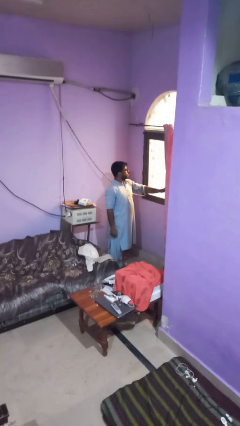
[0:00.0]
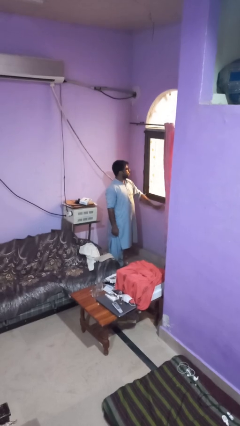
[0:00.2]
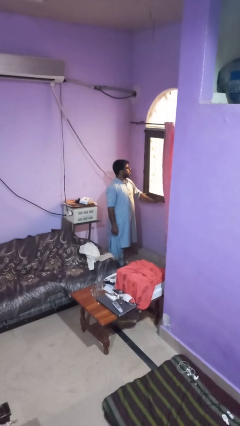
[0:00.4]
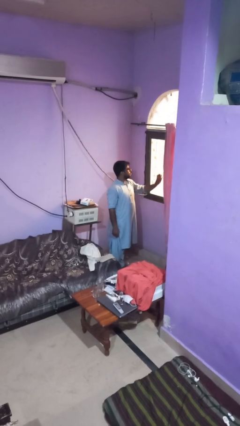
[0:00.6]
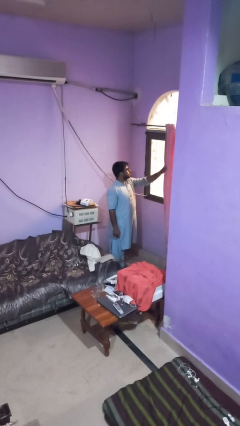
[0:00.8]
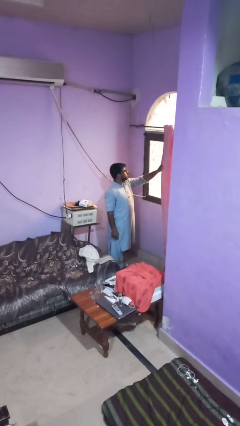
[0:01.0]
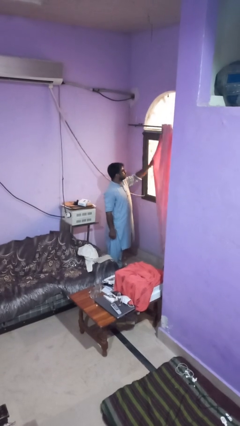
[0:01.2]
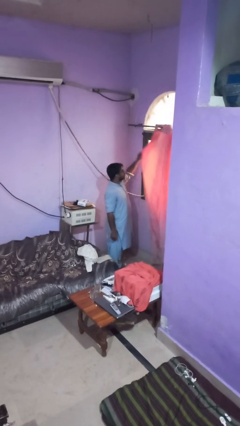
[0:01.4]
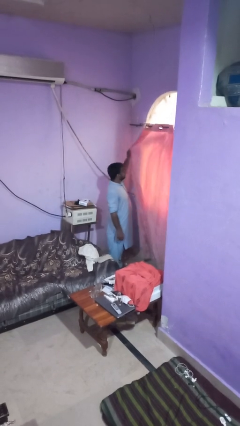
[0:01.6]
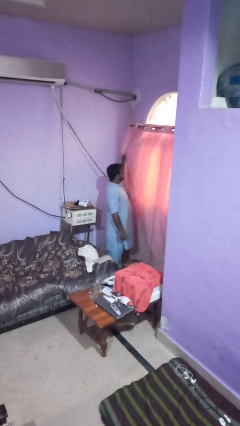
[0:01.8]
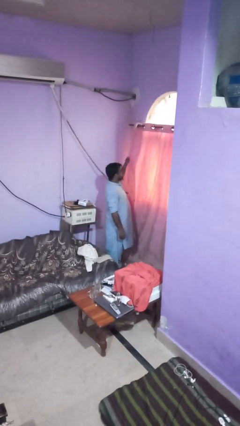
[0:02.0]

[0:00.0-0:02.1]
person closes curtains

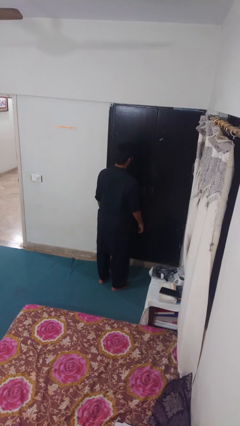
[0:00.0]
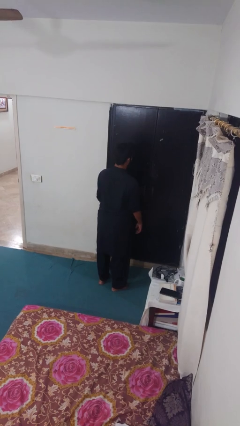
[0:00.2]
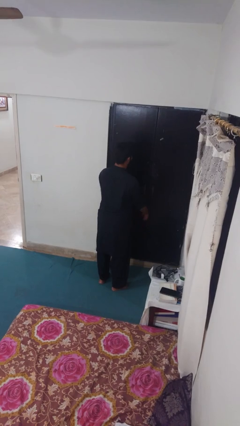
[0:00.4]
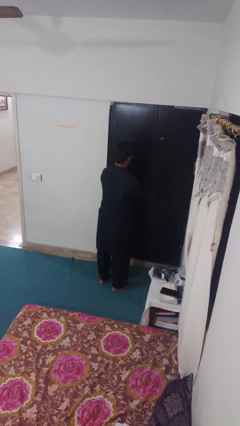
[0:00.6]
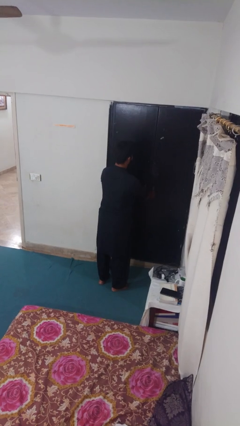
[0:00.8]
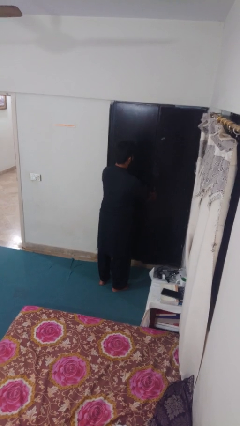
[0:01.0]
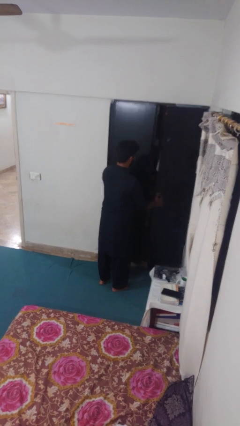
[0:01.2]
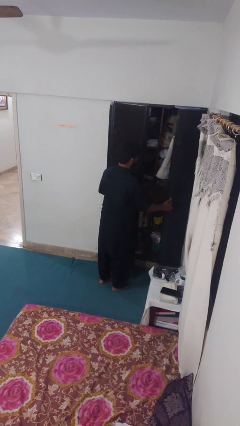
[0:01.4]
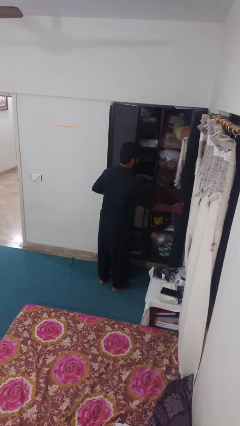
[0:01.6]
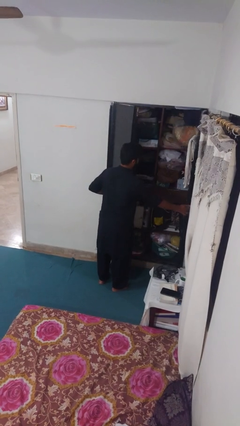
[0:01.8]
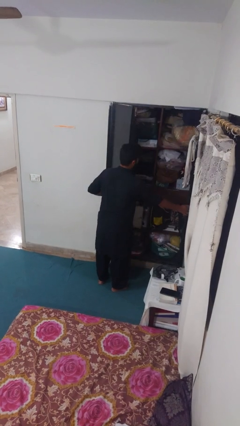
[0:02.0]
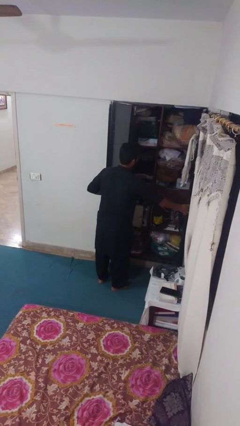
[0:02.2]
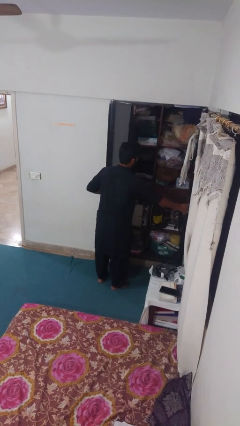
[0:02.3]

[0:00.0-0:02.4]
person opens closet door

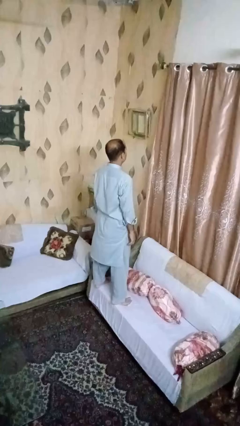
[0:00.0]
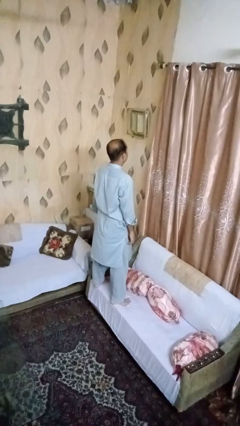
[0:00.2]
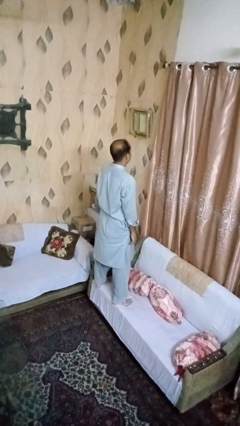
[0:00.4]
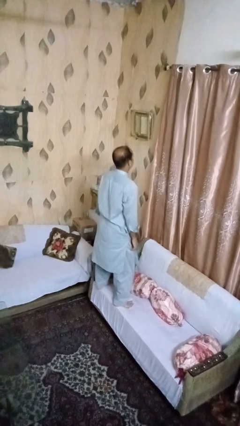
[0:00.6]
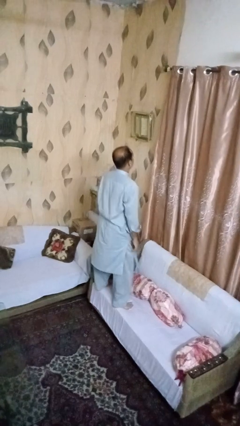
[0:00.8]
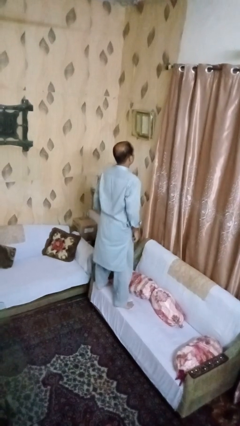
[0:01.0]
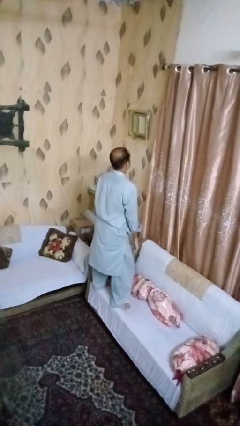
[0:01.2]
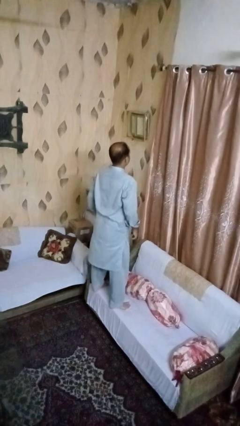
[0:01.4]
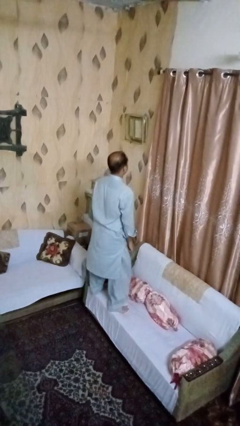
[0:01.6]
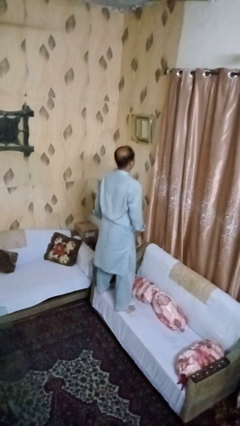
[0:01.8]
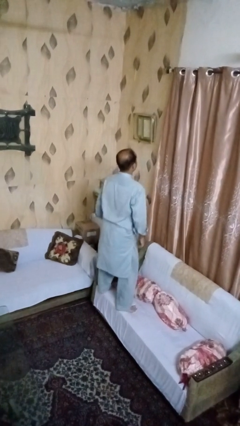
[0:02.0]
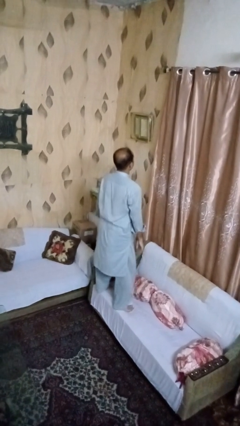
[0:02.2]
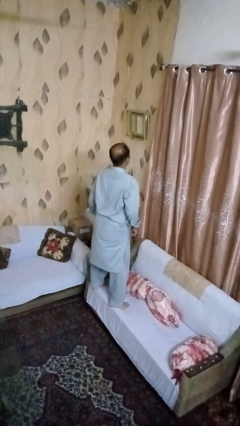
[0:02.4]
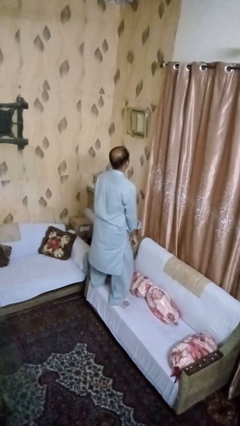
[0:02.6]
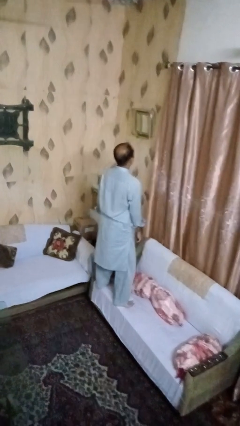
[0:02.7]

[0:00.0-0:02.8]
person jumps on couch

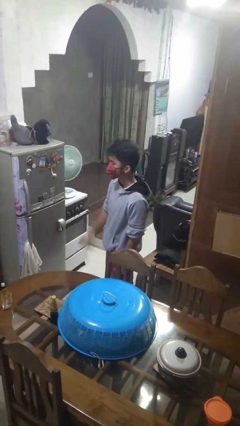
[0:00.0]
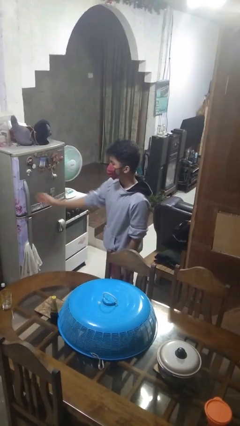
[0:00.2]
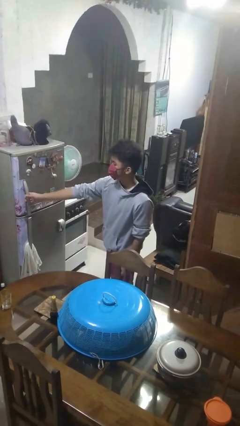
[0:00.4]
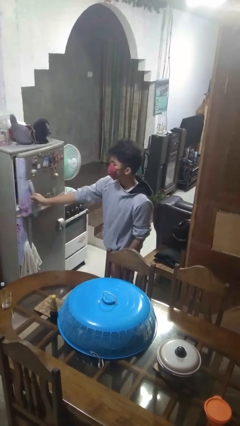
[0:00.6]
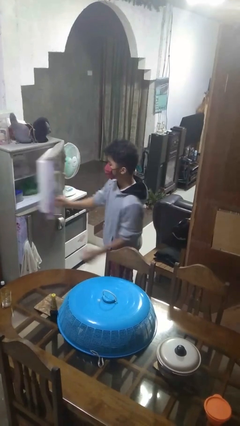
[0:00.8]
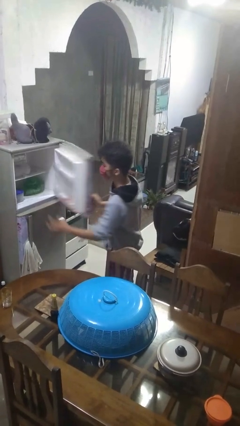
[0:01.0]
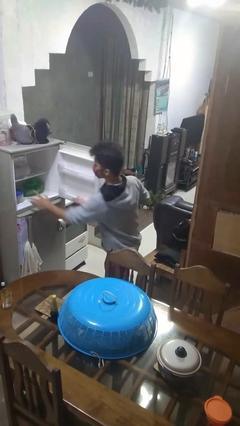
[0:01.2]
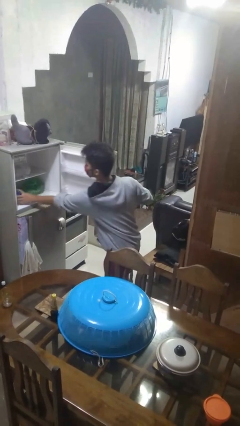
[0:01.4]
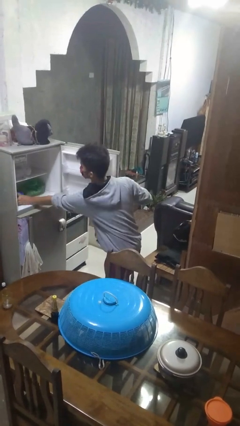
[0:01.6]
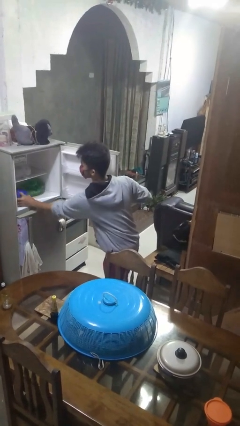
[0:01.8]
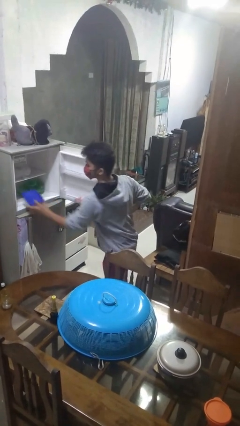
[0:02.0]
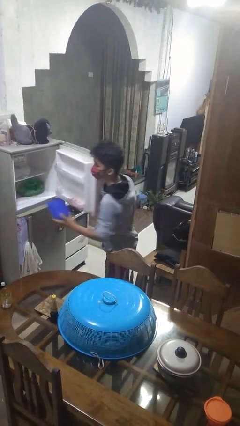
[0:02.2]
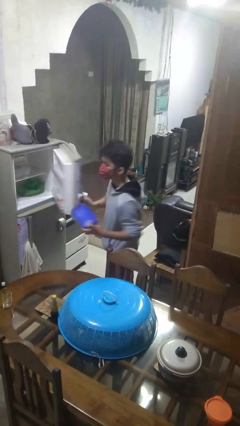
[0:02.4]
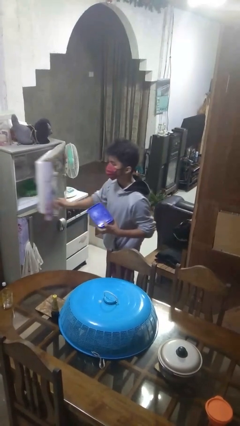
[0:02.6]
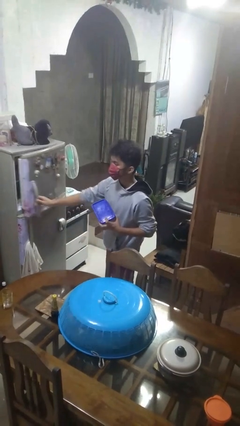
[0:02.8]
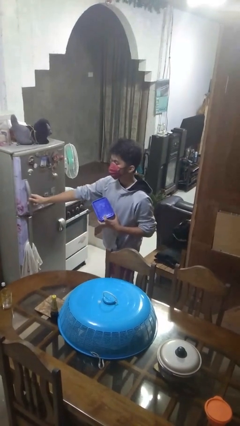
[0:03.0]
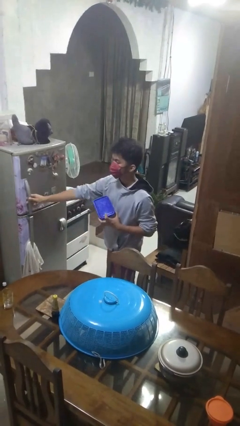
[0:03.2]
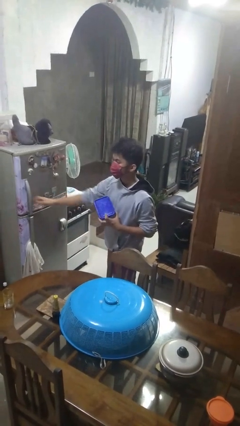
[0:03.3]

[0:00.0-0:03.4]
person takes object from refrigerator

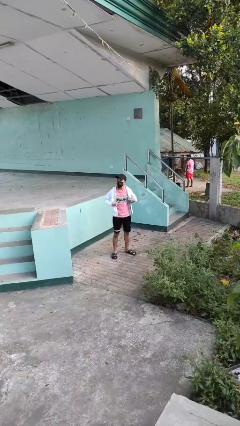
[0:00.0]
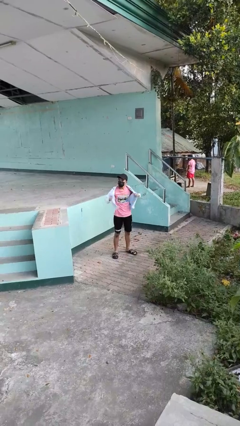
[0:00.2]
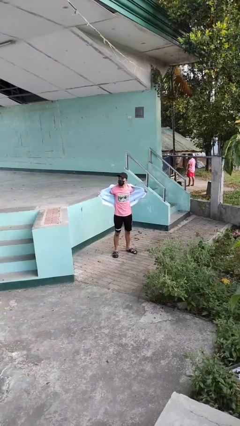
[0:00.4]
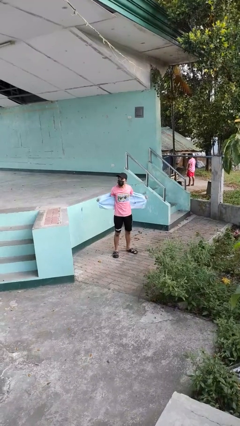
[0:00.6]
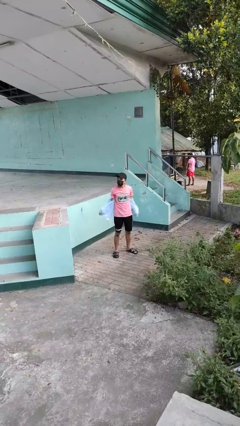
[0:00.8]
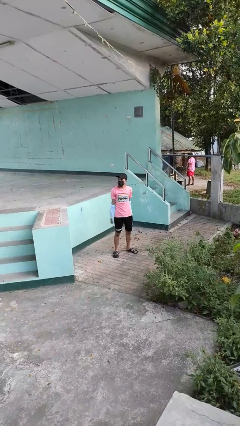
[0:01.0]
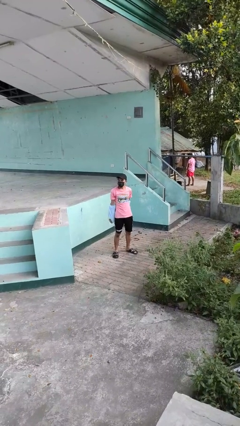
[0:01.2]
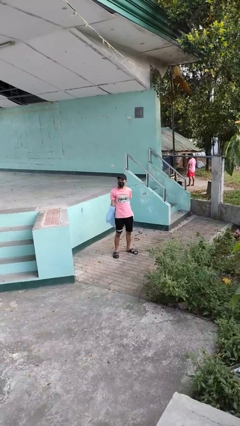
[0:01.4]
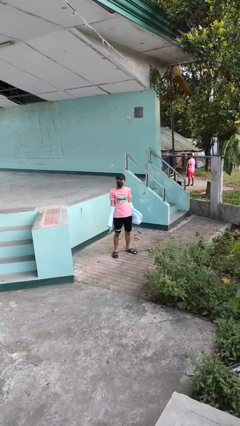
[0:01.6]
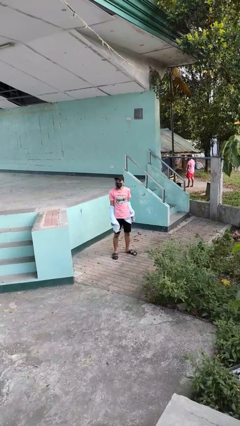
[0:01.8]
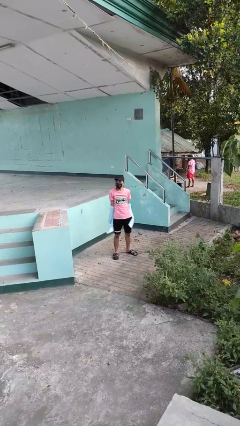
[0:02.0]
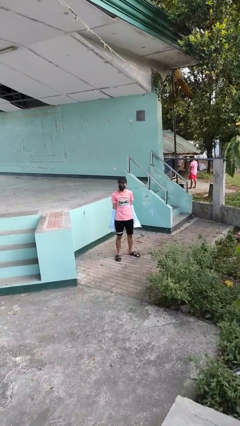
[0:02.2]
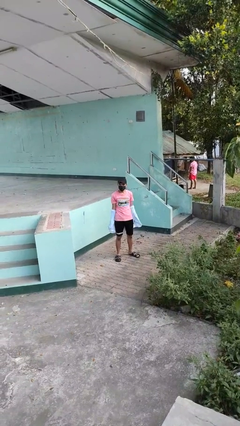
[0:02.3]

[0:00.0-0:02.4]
person takes off jacket

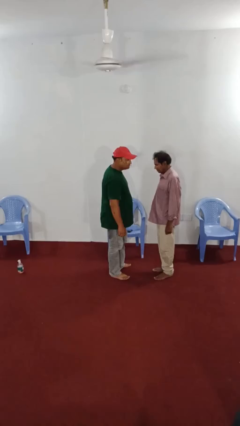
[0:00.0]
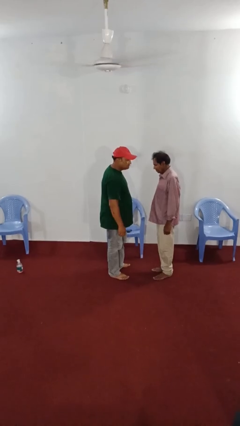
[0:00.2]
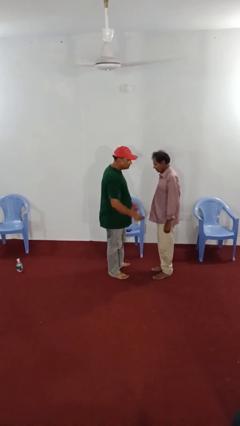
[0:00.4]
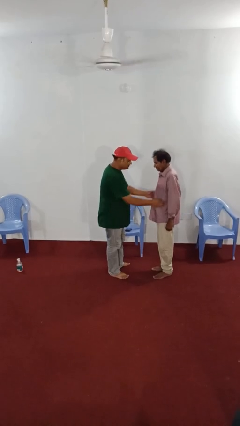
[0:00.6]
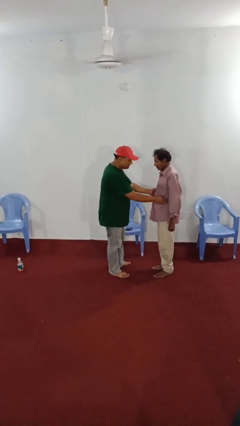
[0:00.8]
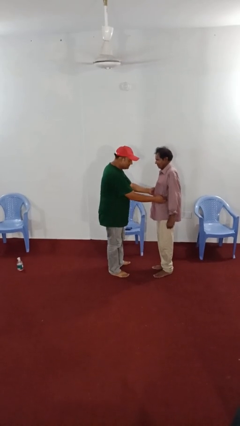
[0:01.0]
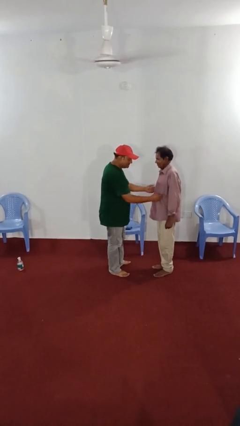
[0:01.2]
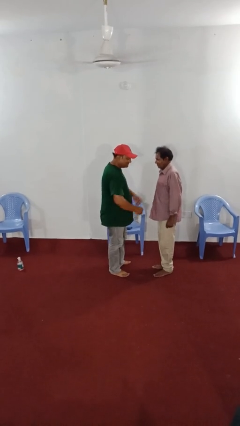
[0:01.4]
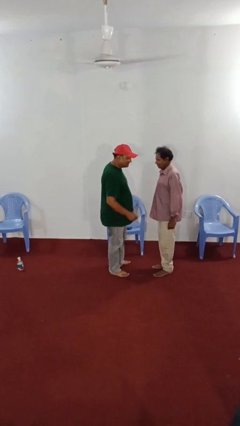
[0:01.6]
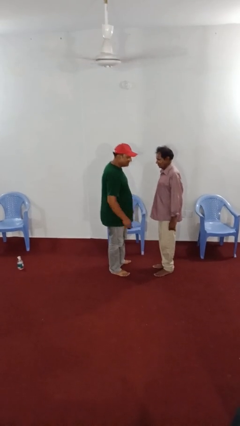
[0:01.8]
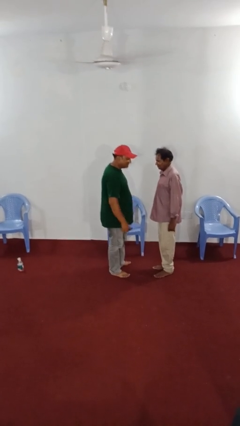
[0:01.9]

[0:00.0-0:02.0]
person tickles person

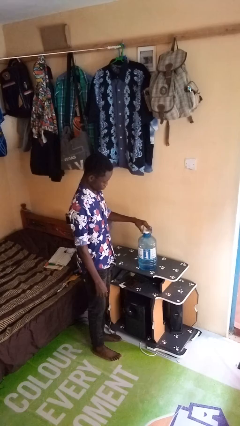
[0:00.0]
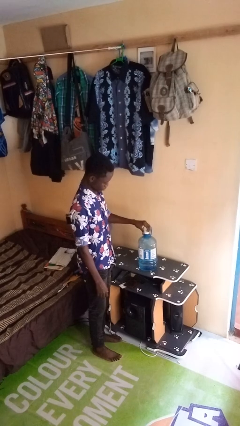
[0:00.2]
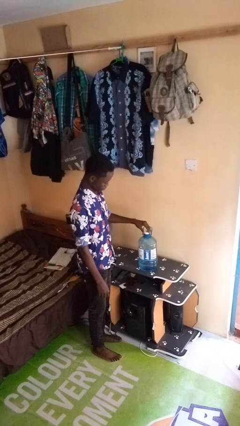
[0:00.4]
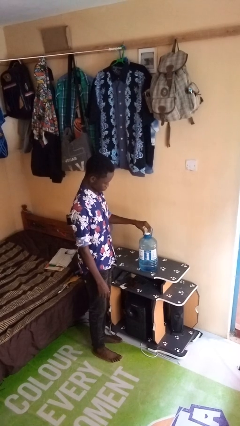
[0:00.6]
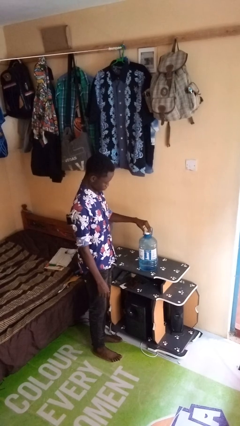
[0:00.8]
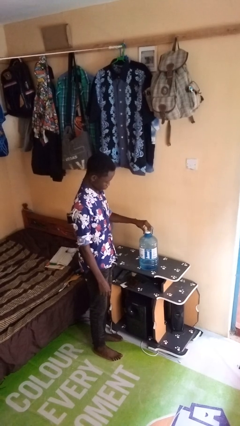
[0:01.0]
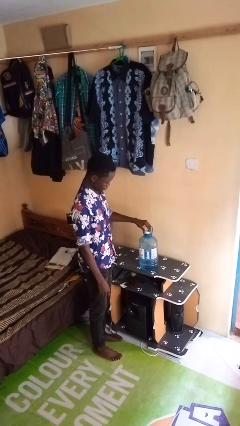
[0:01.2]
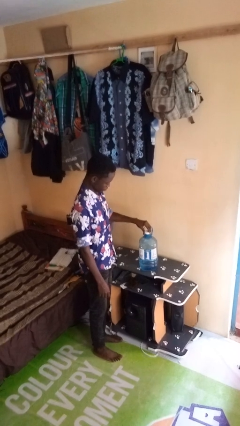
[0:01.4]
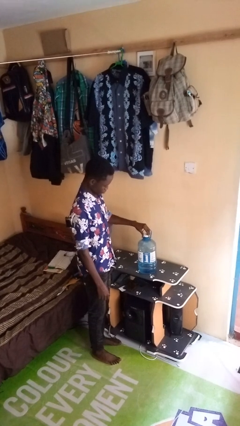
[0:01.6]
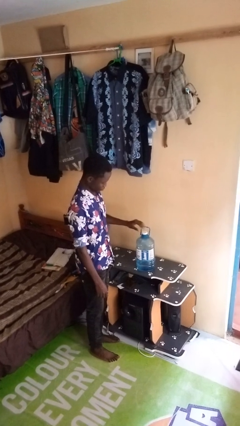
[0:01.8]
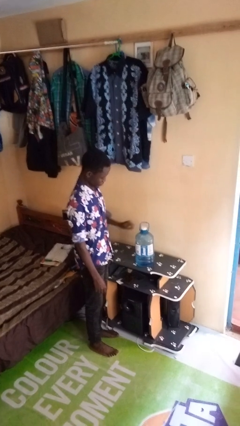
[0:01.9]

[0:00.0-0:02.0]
person screws lid to bottle
